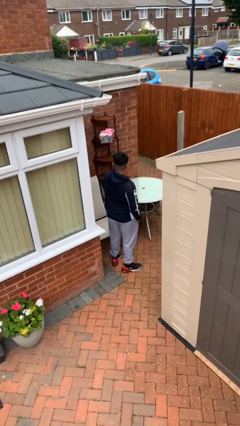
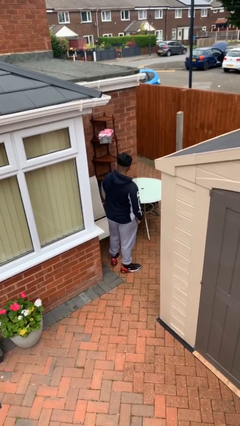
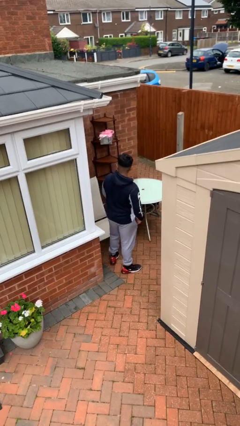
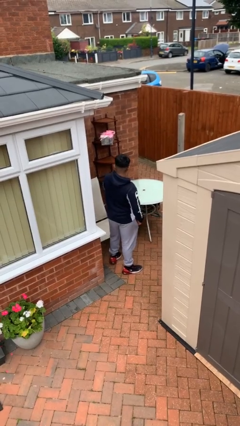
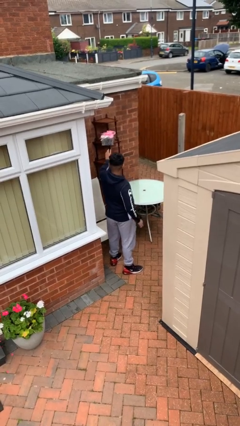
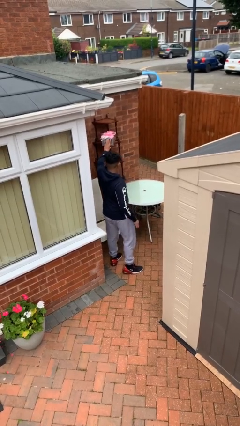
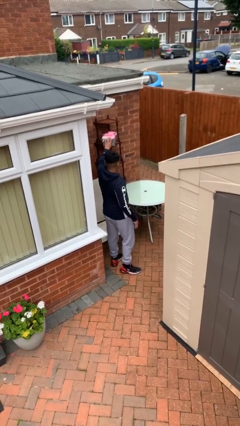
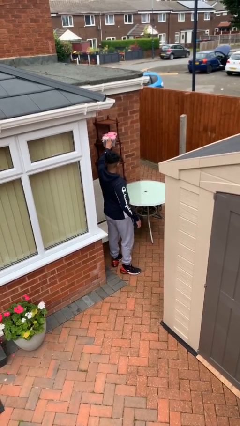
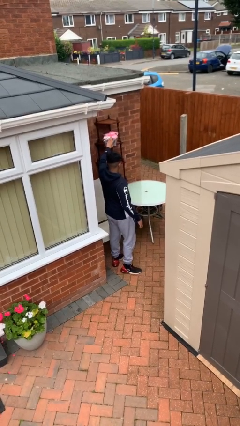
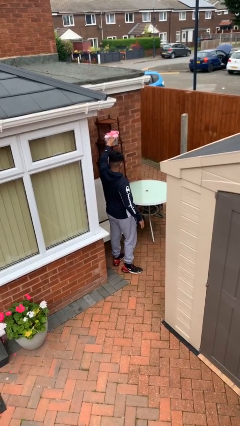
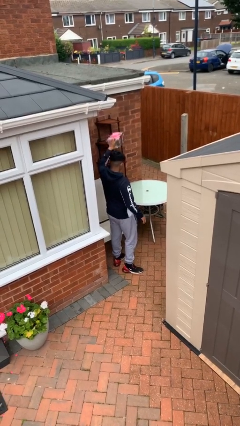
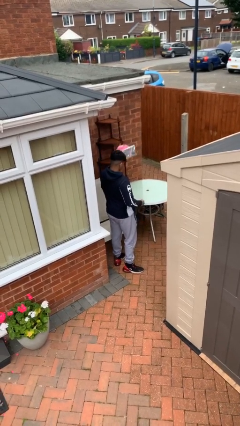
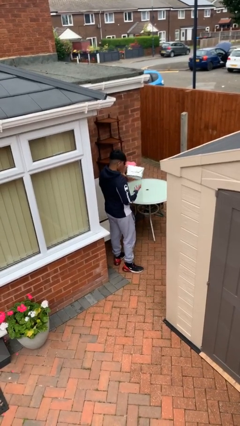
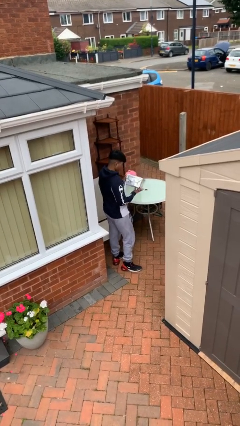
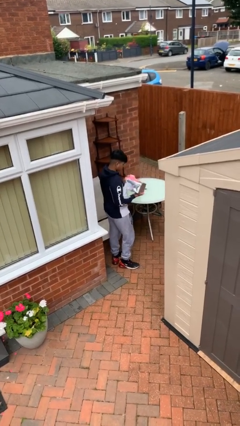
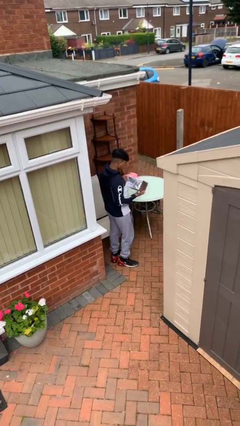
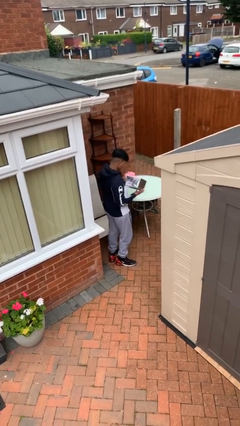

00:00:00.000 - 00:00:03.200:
person picks up object from shelf

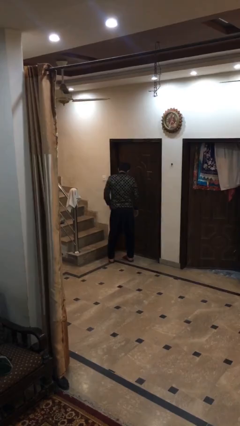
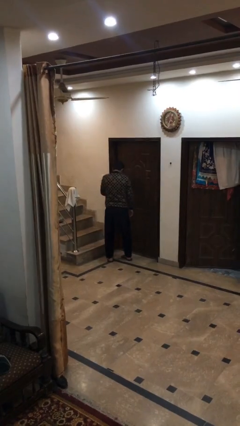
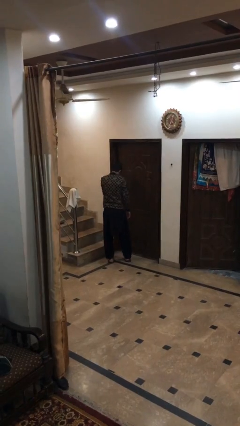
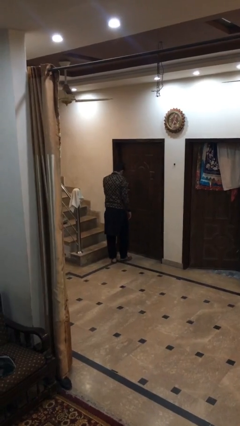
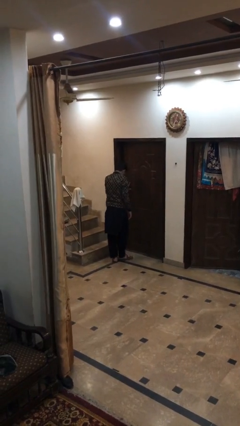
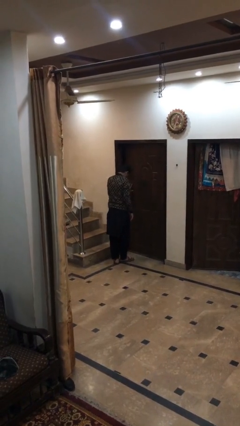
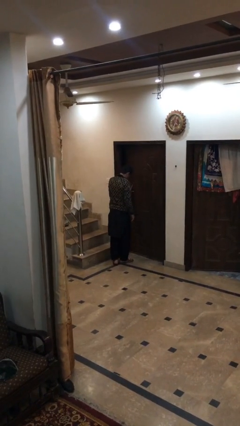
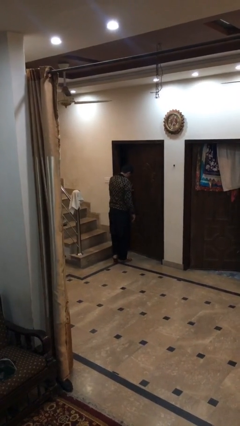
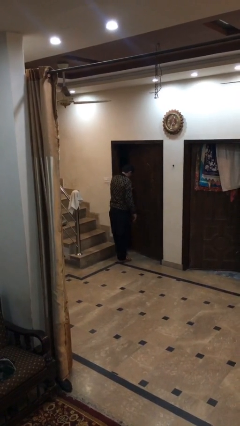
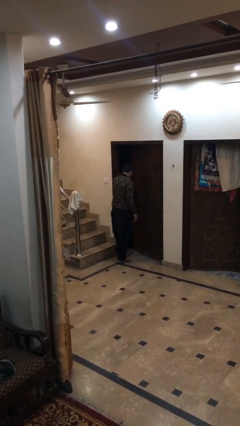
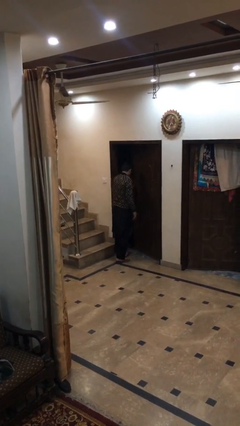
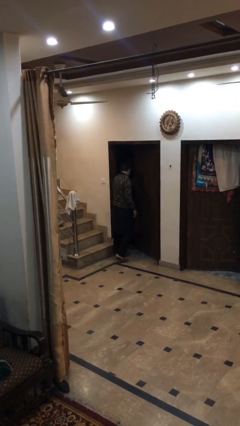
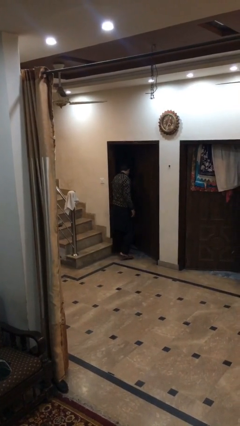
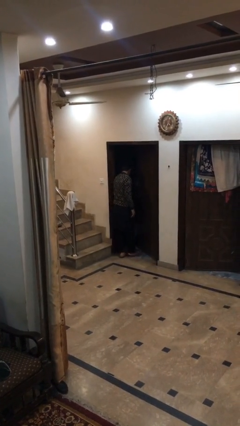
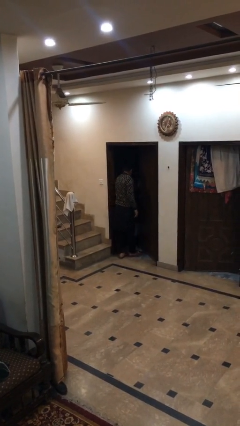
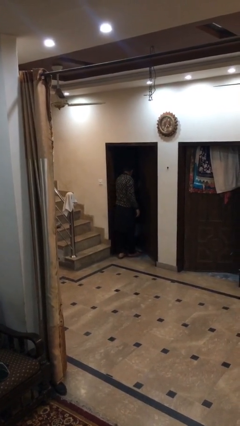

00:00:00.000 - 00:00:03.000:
person opens facility door

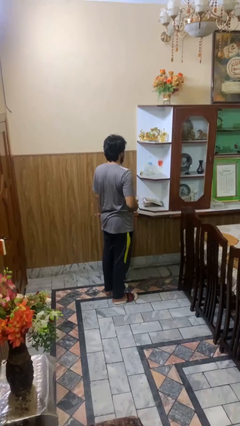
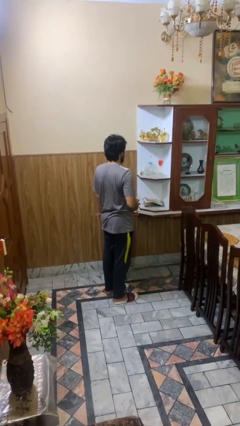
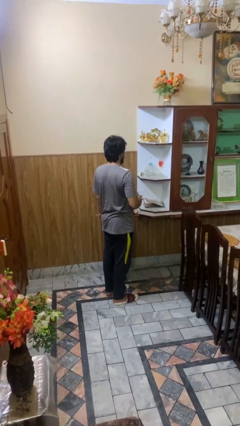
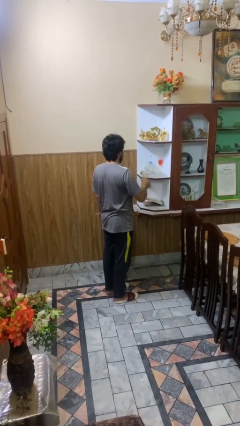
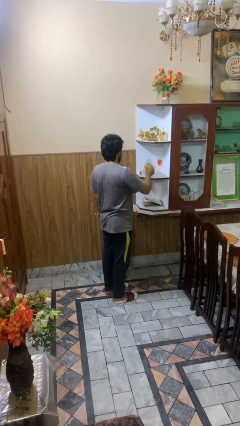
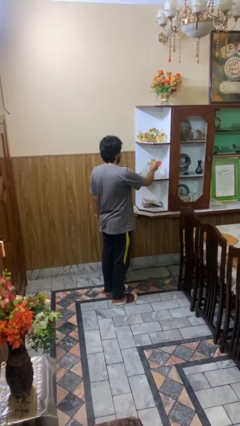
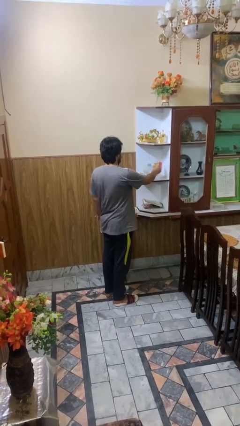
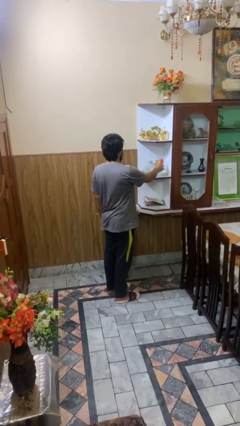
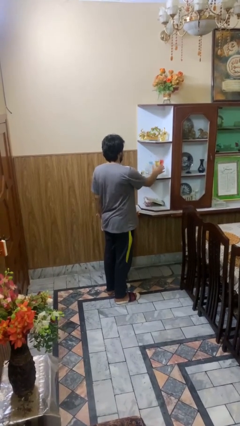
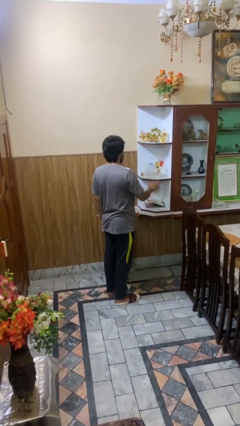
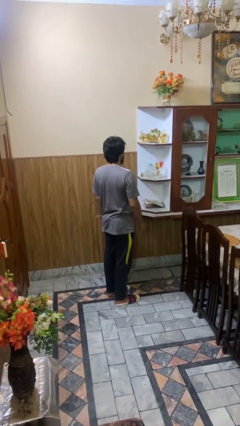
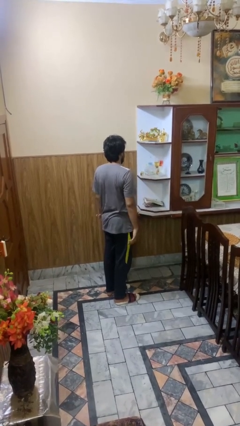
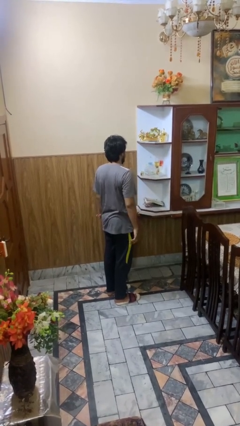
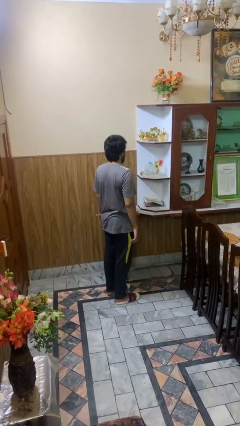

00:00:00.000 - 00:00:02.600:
person puts down object into cabinet

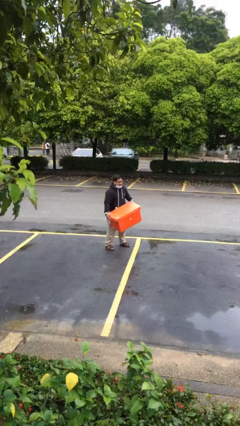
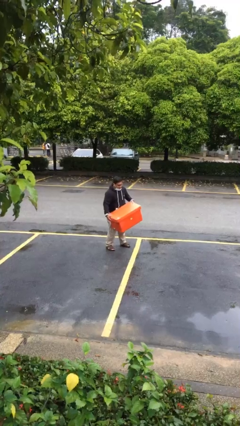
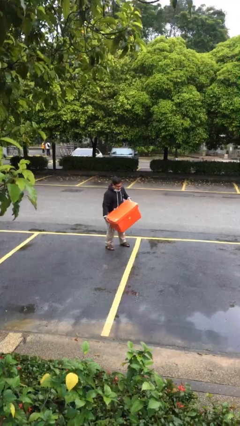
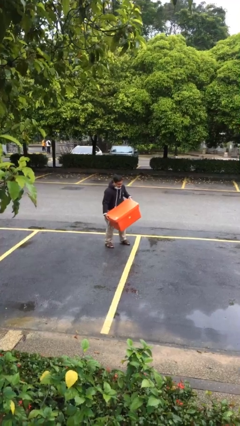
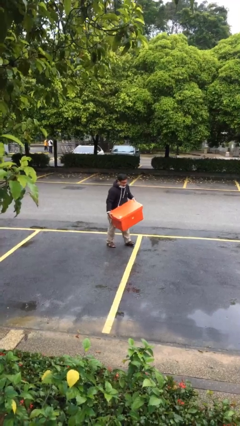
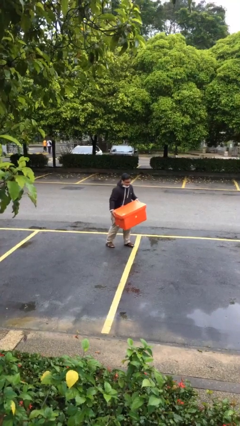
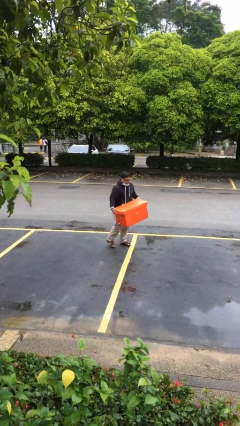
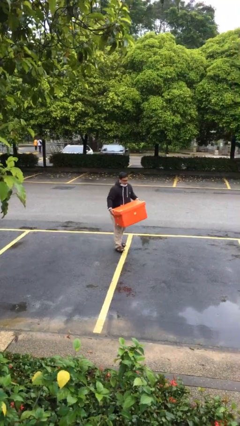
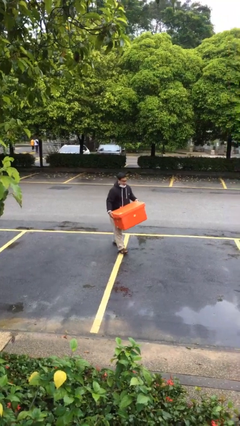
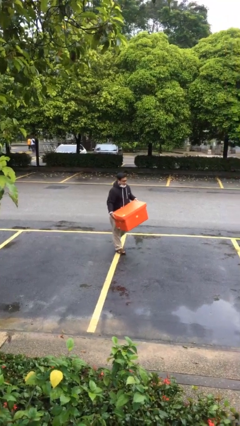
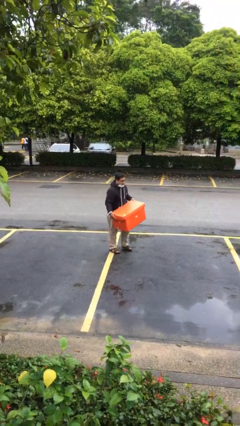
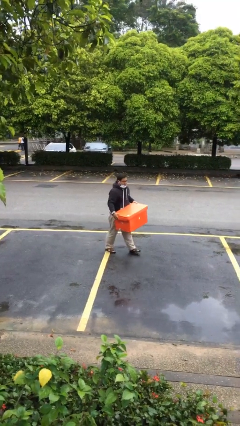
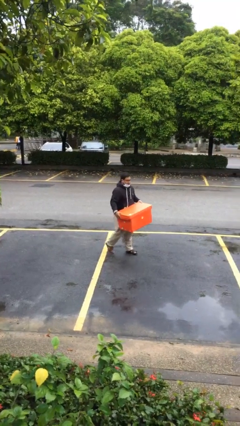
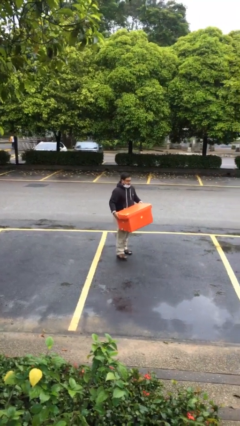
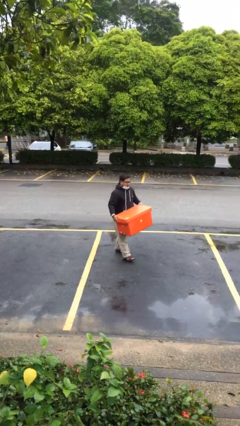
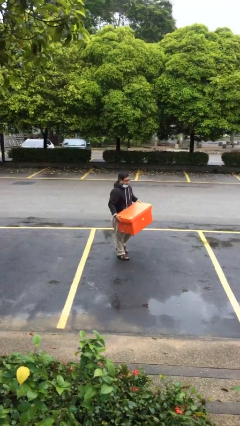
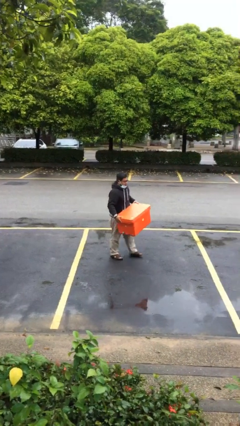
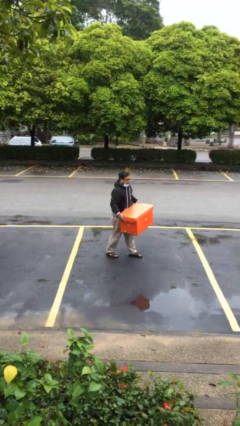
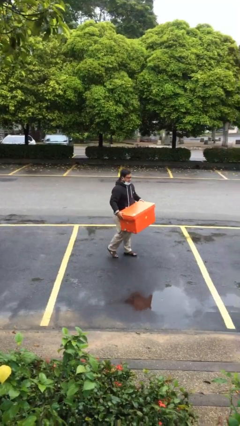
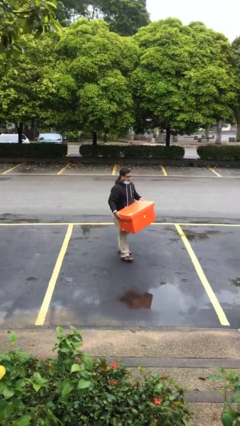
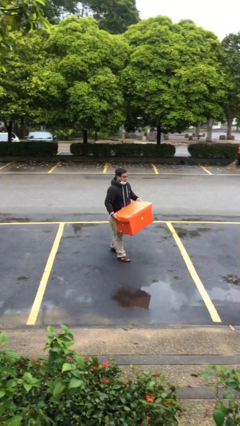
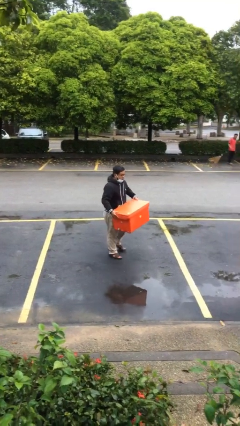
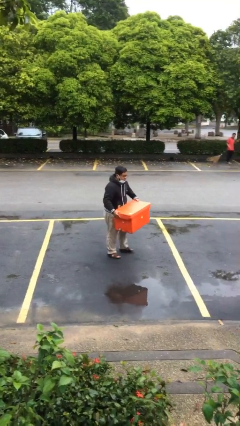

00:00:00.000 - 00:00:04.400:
person carries heavy object

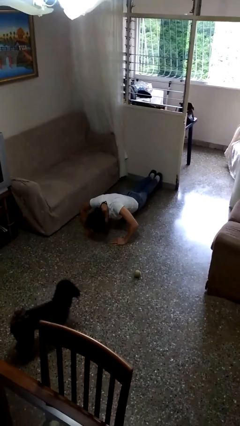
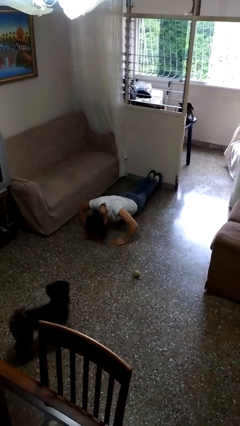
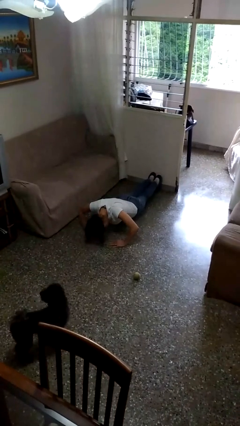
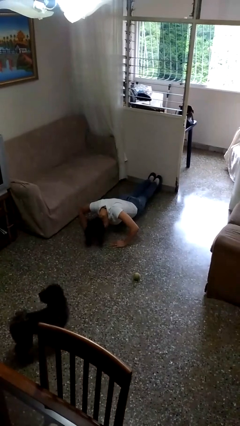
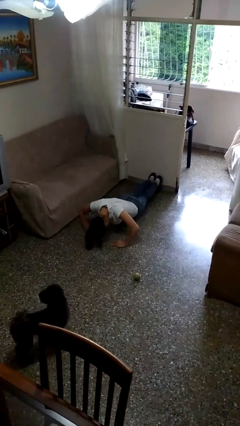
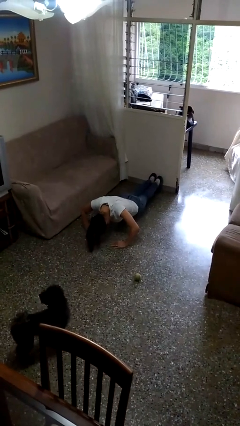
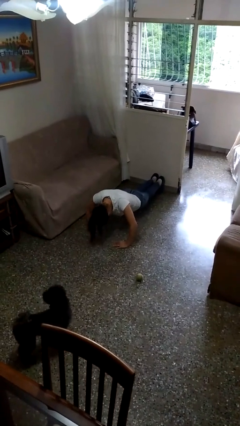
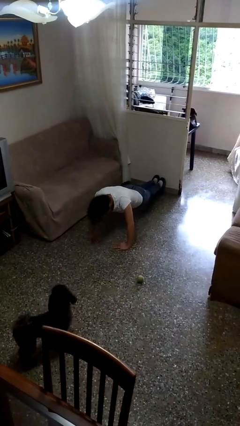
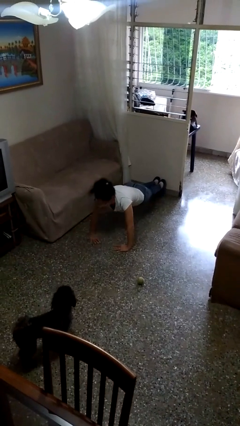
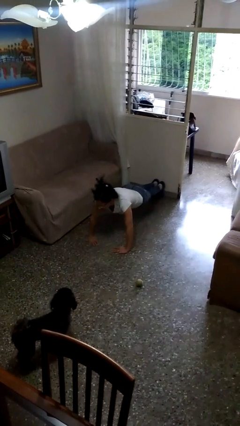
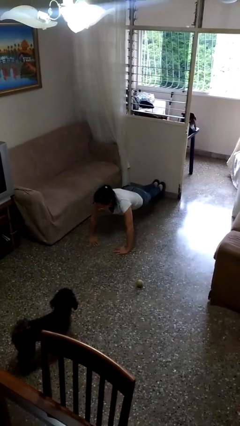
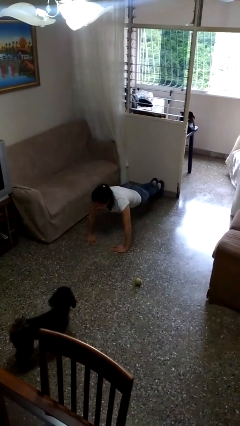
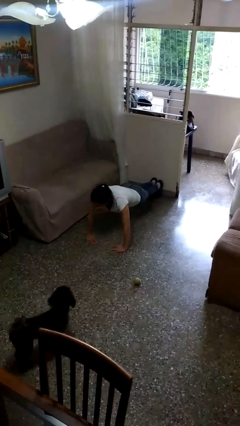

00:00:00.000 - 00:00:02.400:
person exercises with pushup

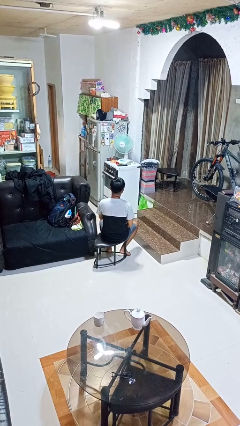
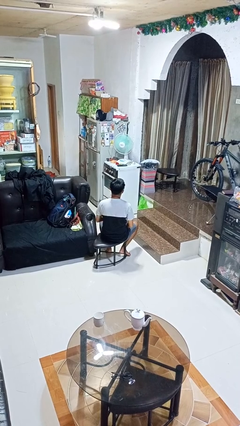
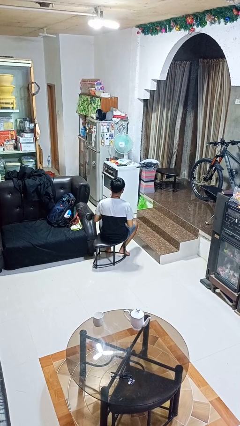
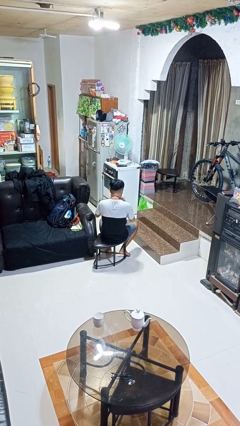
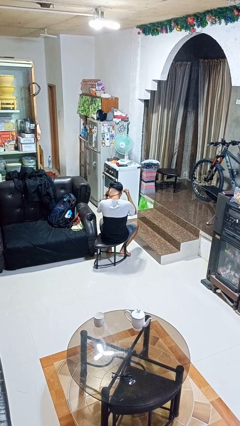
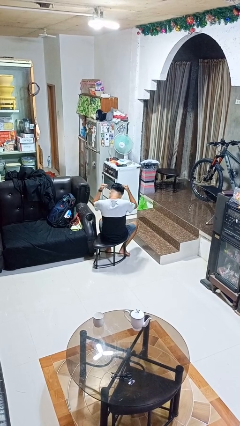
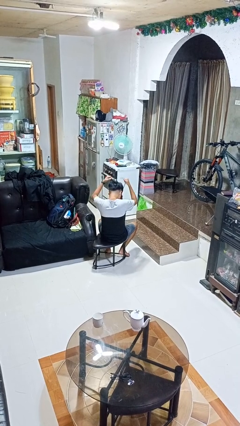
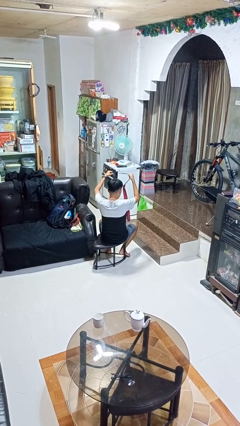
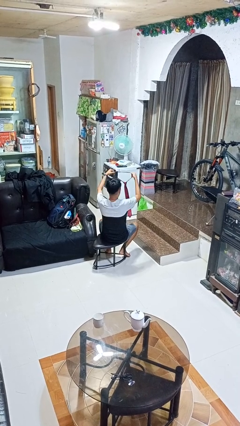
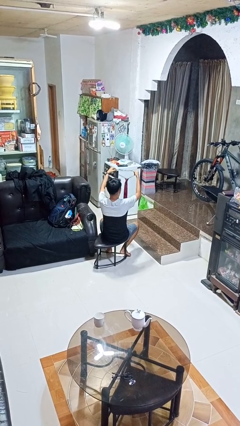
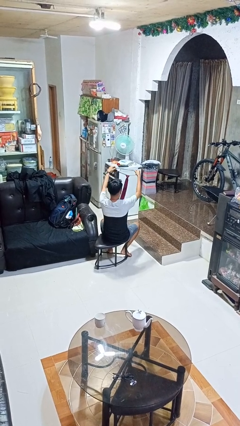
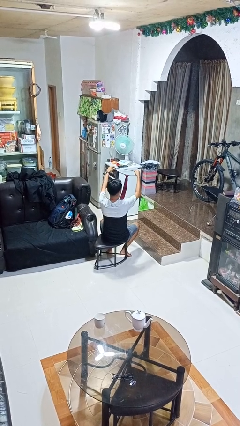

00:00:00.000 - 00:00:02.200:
person takes off necktie
